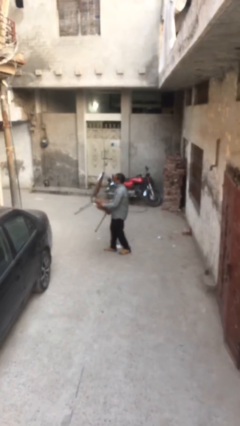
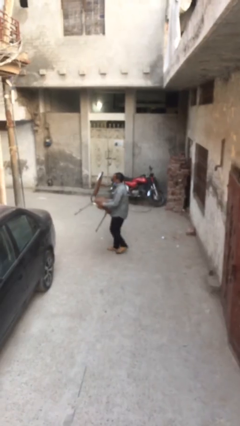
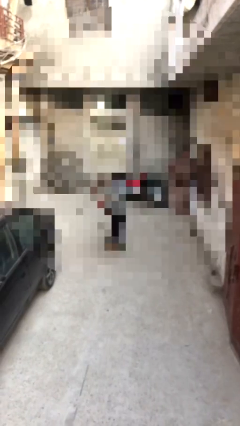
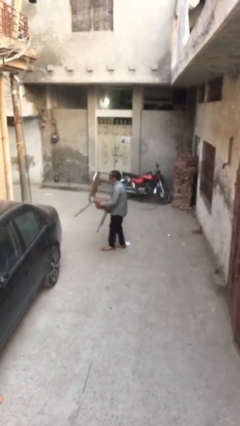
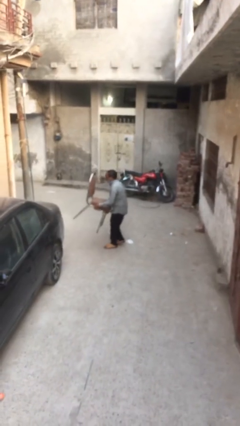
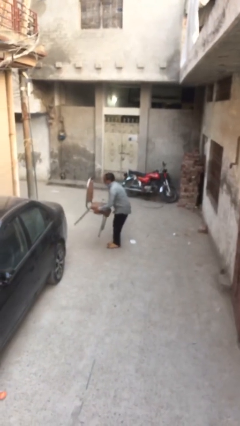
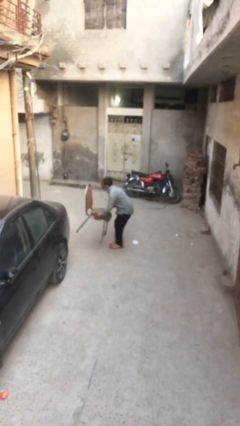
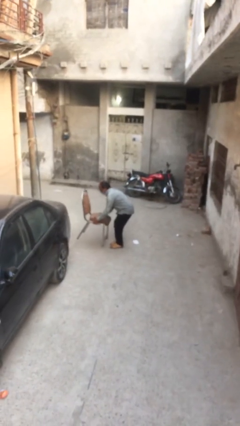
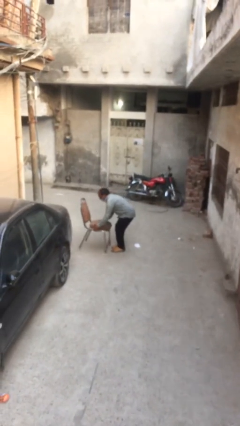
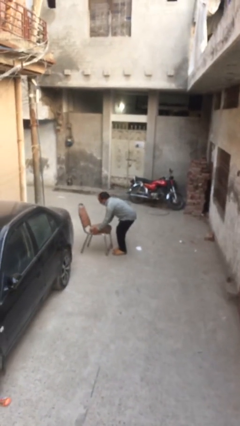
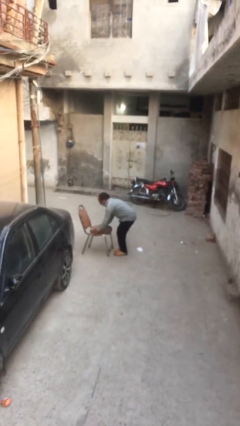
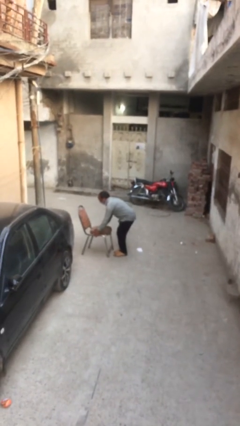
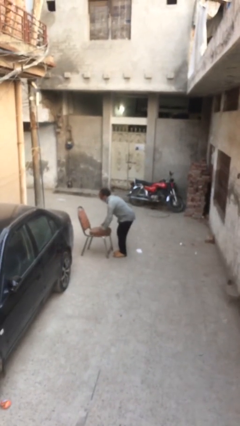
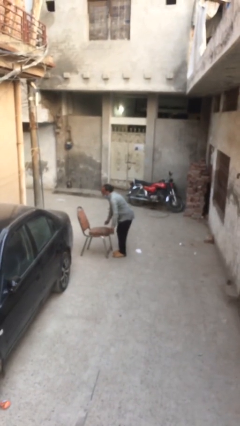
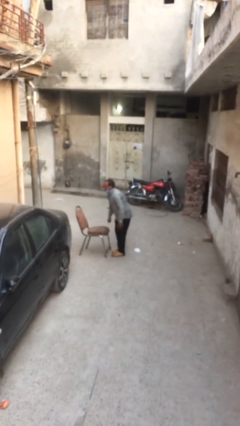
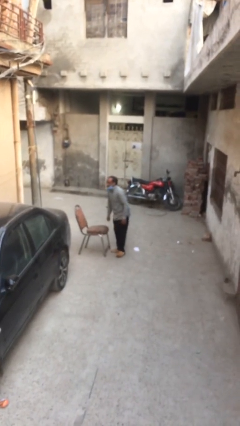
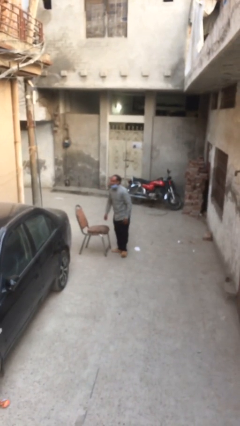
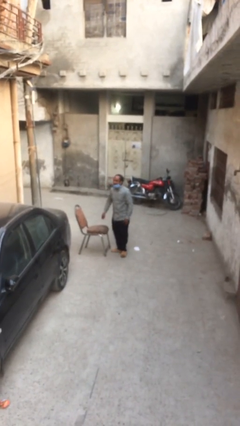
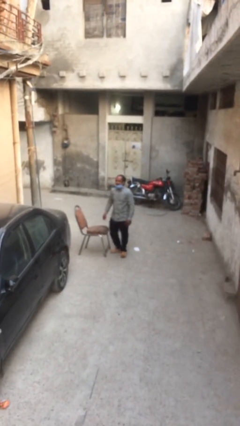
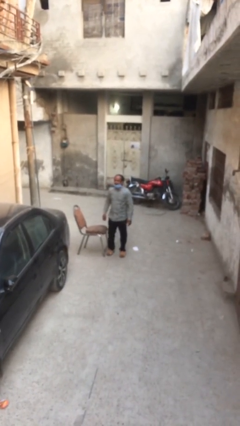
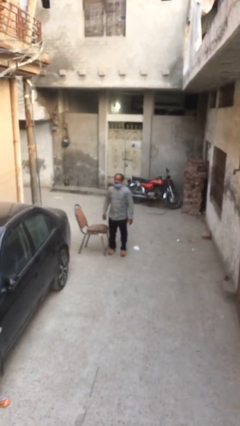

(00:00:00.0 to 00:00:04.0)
person puts down object on floor

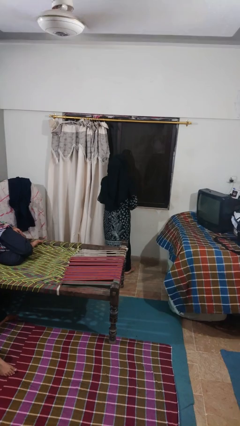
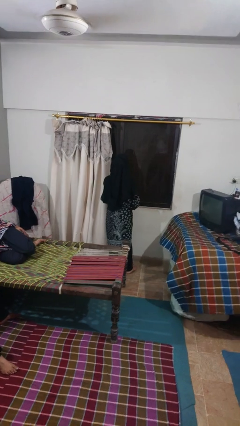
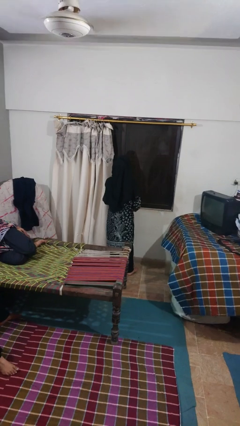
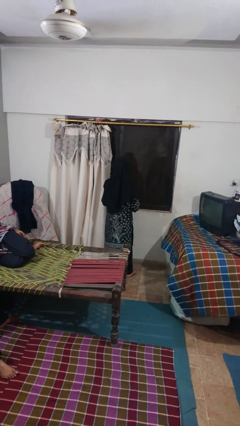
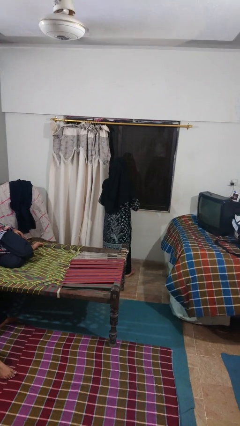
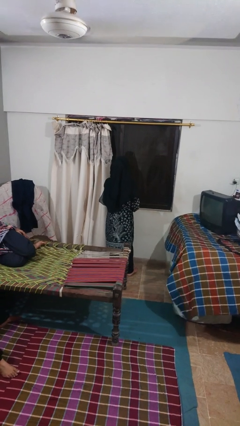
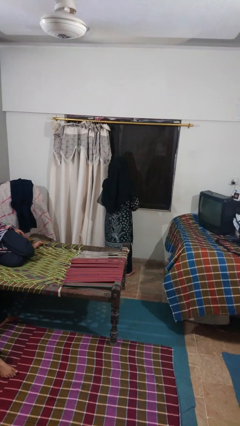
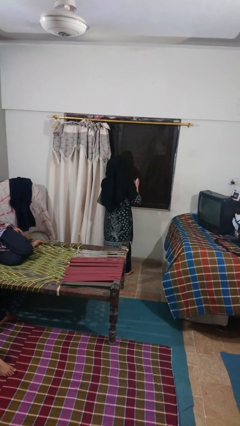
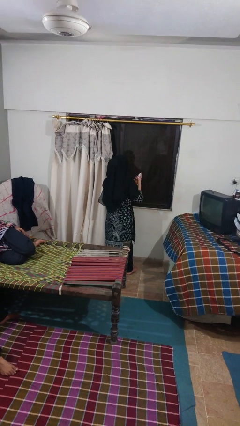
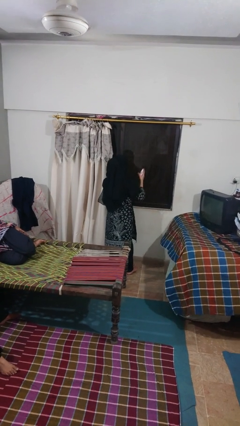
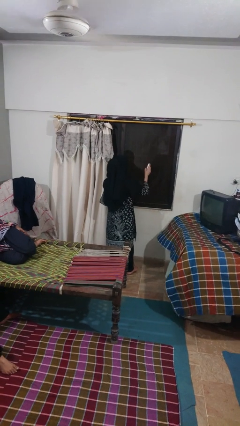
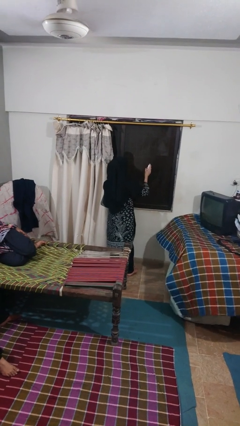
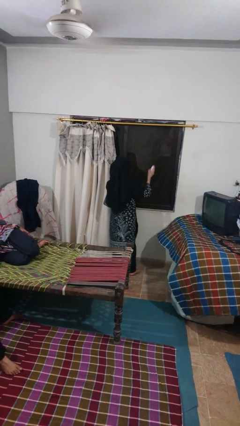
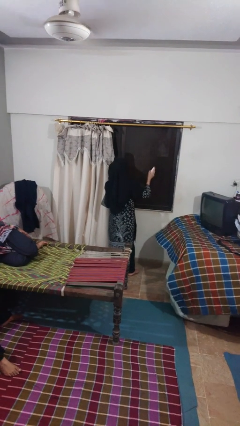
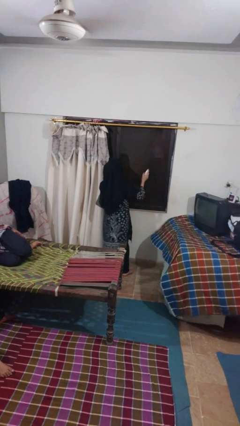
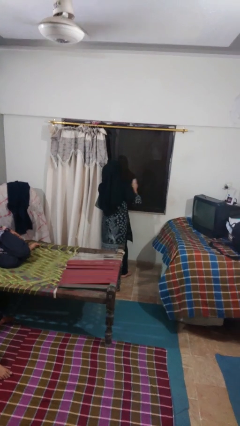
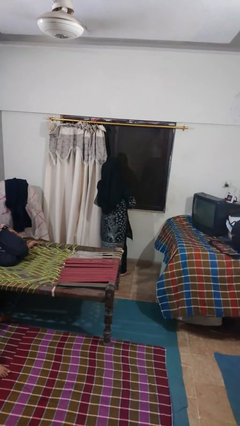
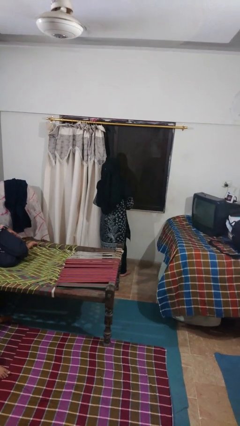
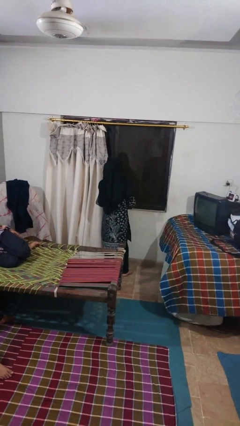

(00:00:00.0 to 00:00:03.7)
person sprays from bottle

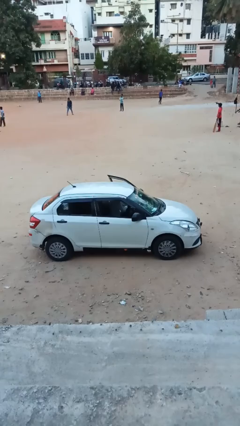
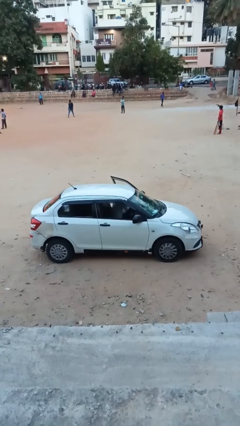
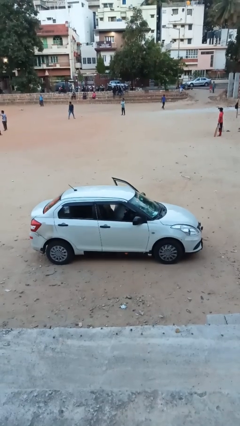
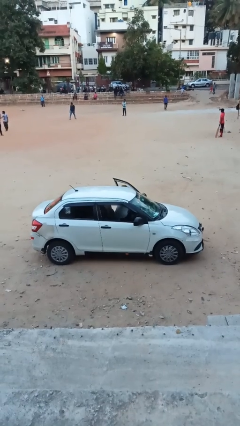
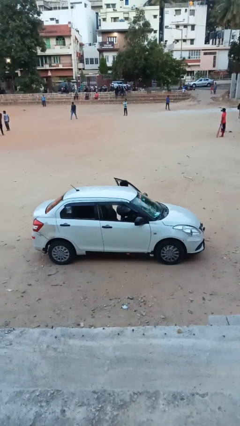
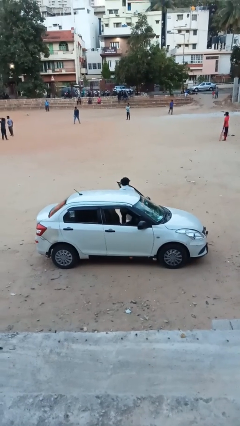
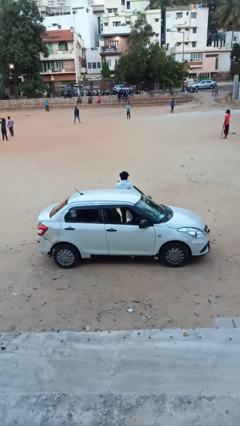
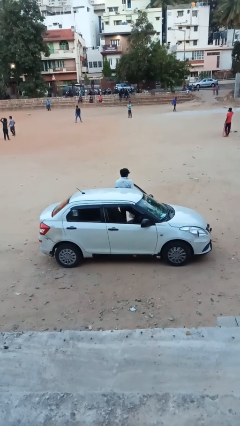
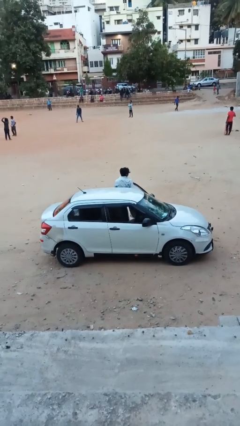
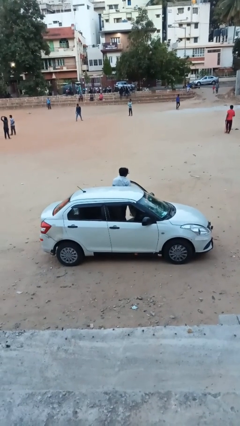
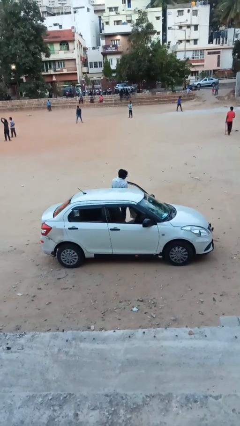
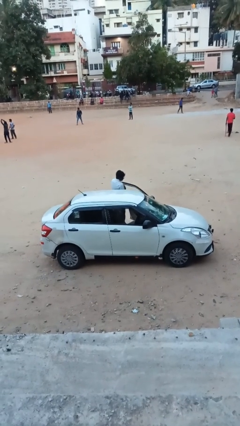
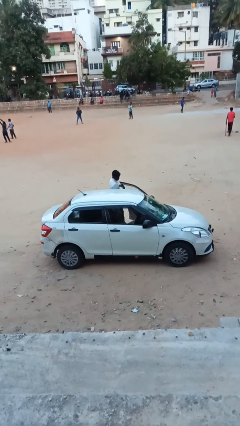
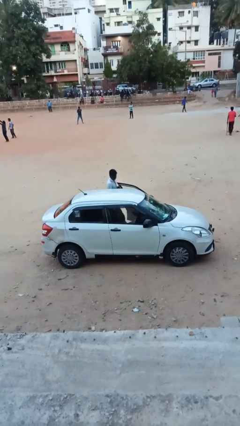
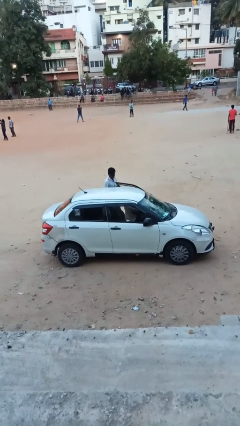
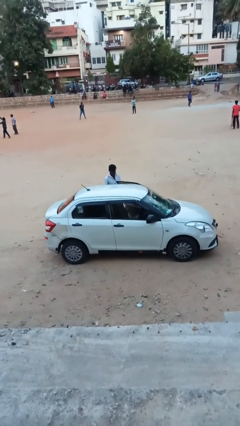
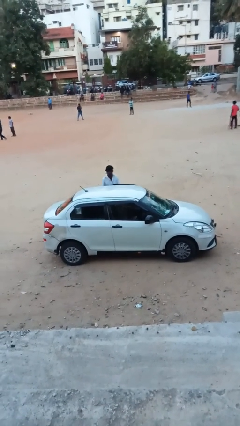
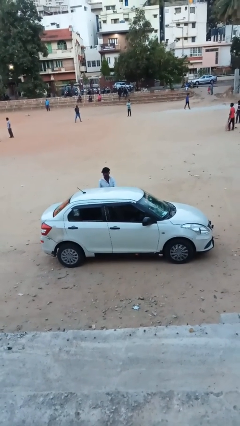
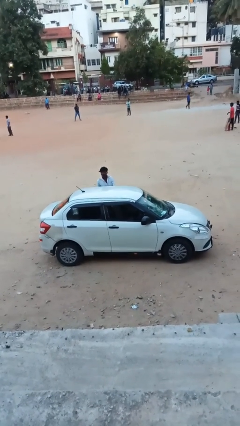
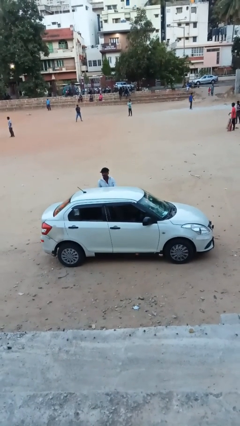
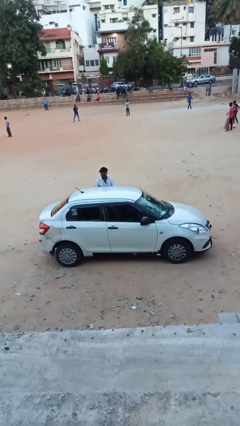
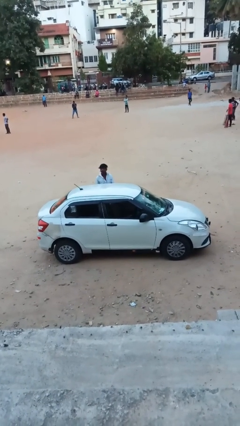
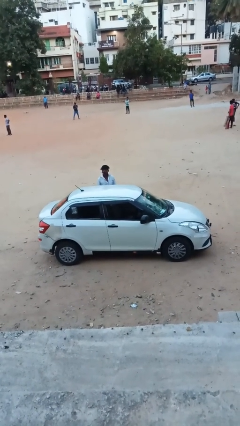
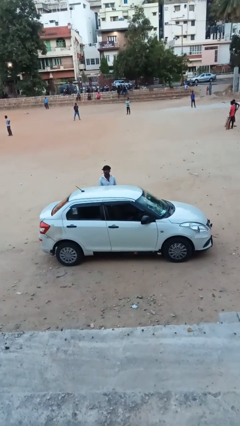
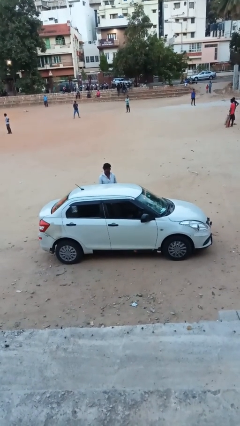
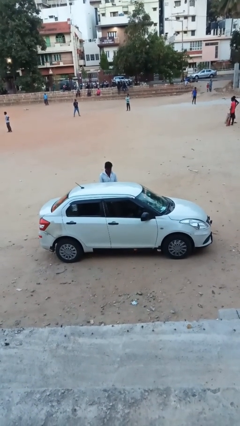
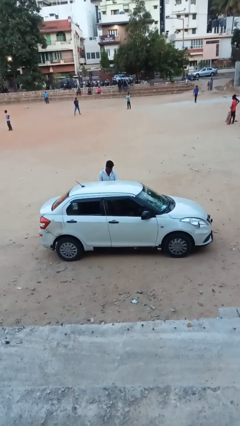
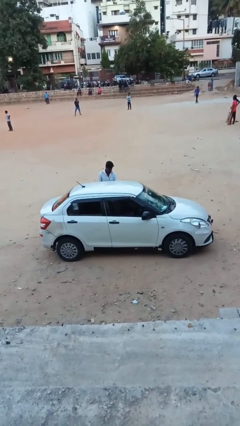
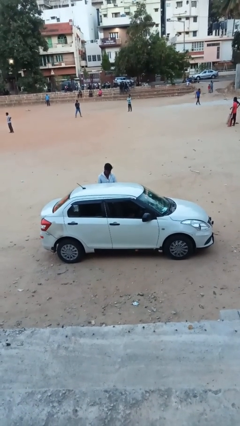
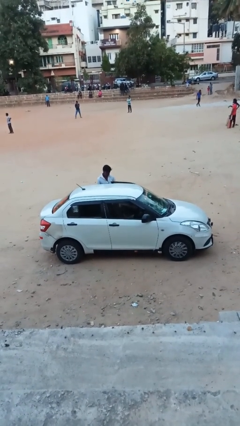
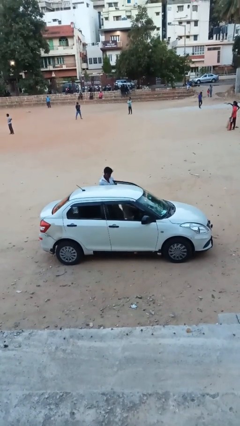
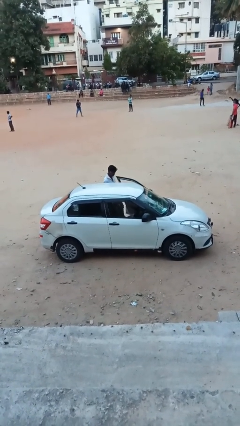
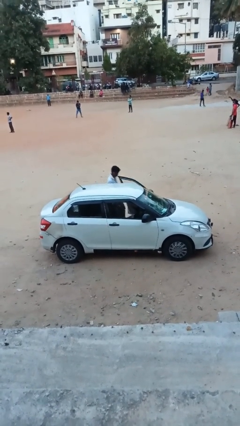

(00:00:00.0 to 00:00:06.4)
car drops off person

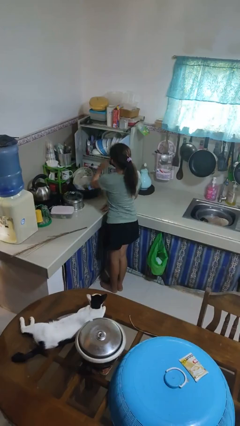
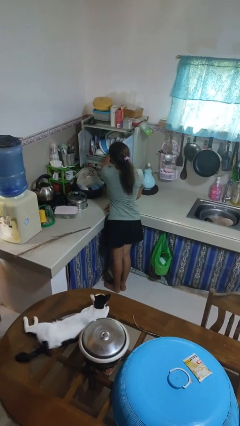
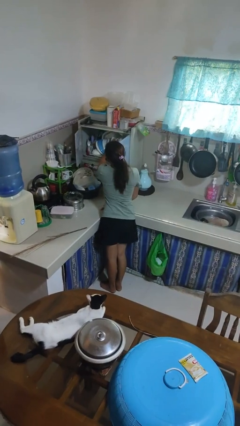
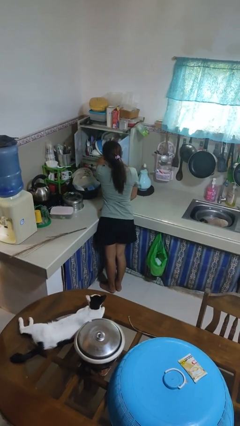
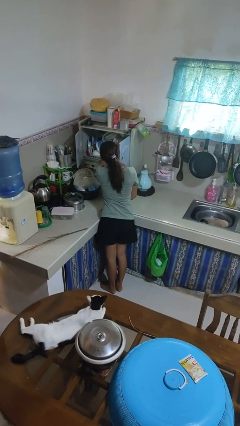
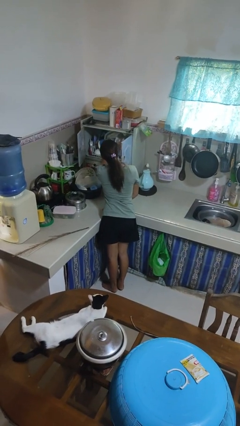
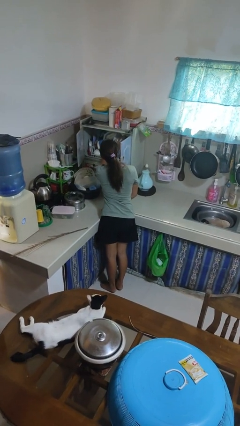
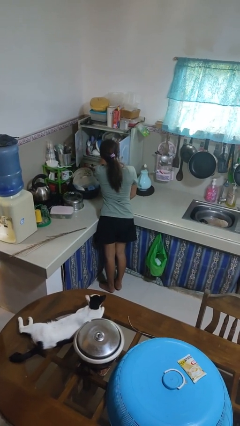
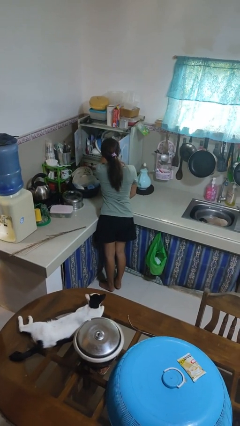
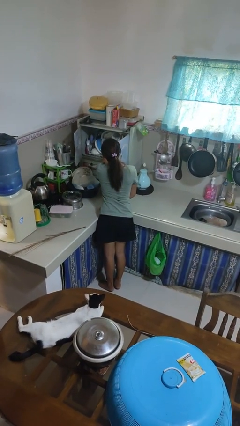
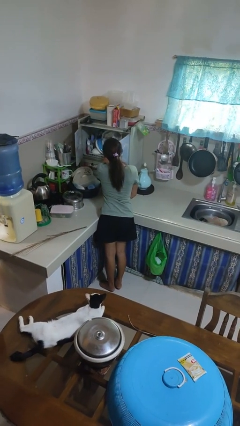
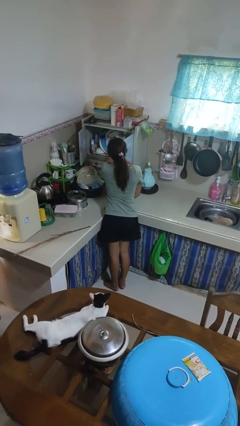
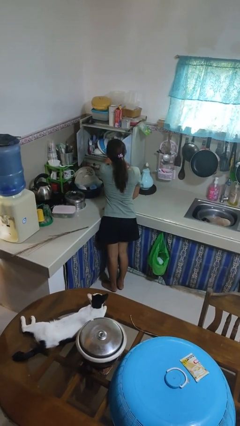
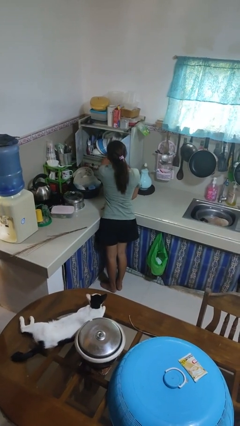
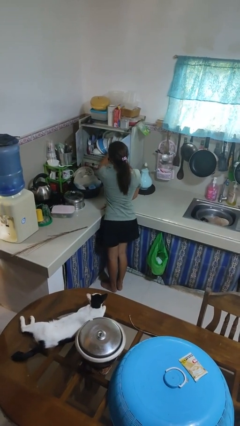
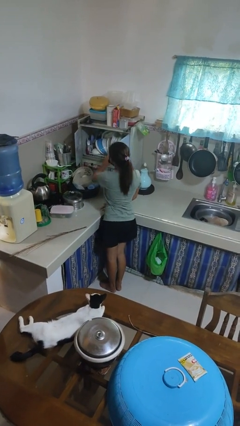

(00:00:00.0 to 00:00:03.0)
person searches in kitchen drawer

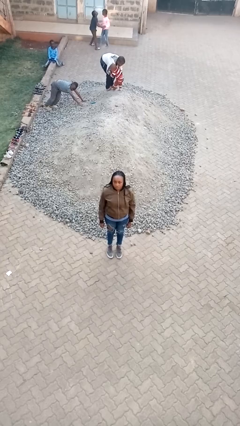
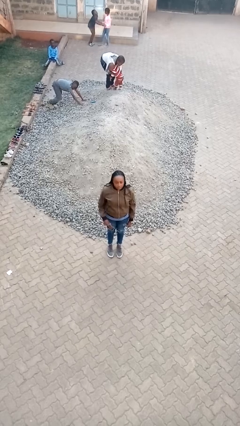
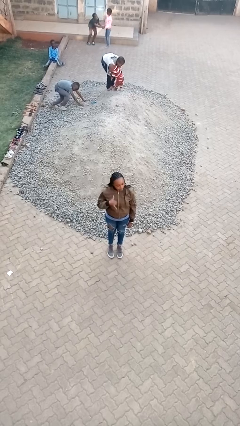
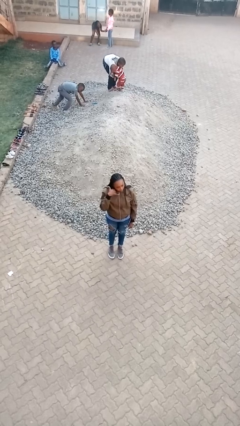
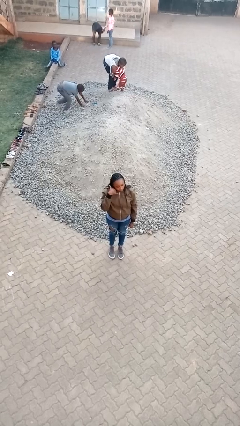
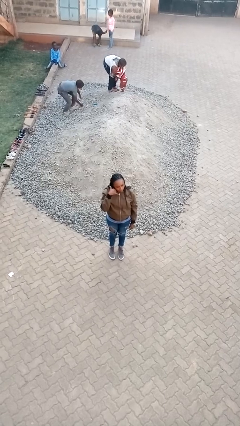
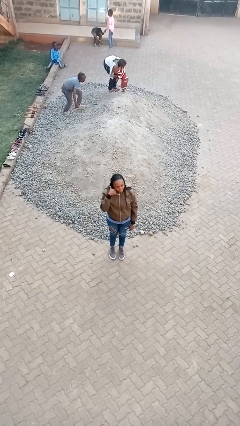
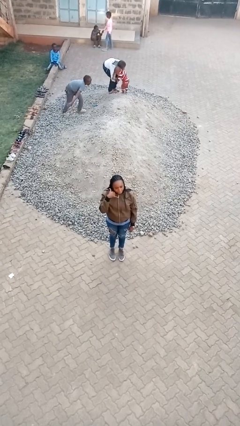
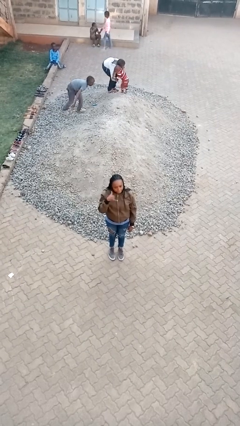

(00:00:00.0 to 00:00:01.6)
person gestures call me
